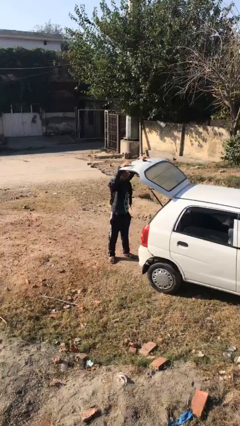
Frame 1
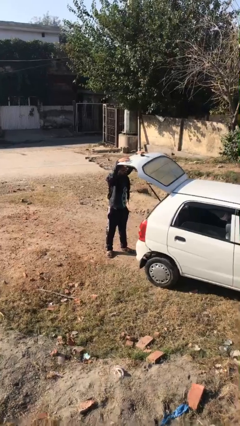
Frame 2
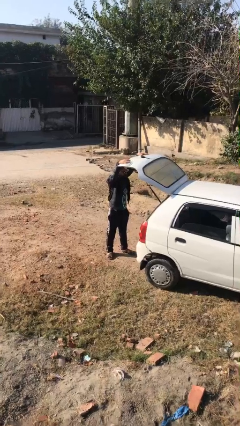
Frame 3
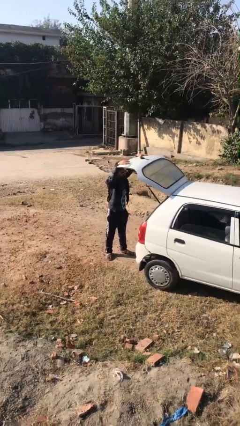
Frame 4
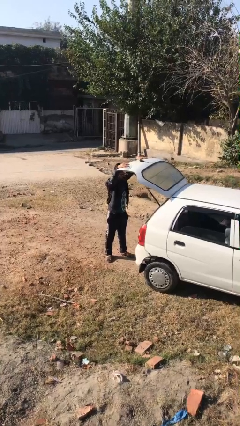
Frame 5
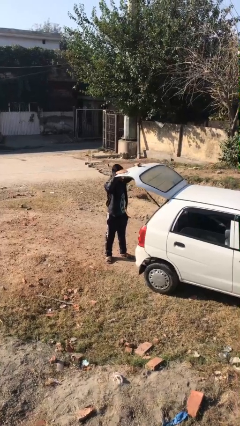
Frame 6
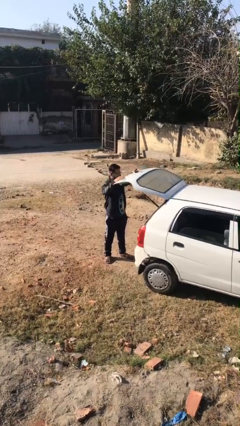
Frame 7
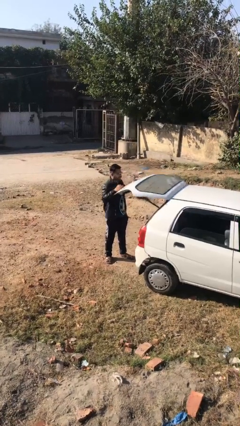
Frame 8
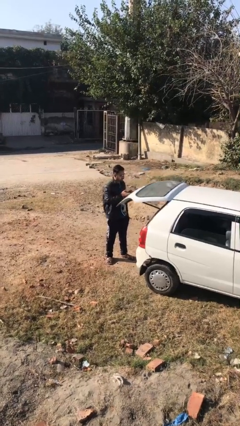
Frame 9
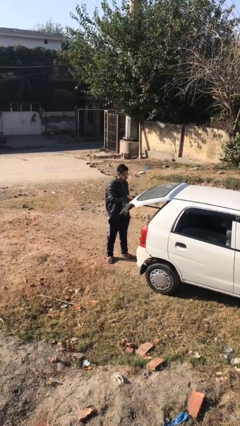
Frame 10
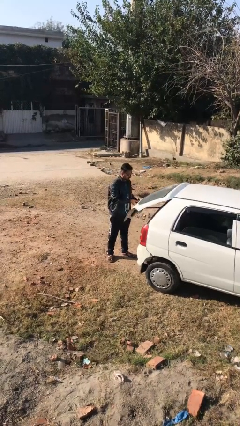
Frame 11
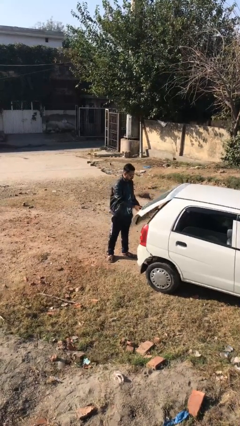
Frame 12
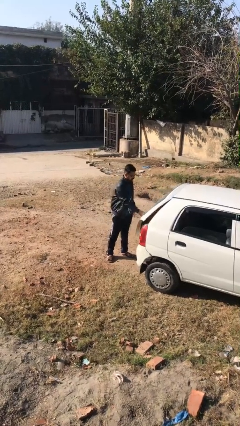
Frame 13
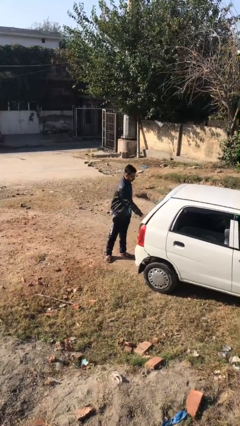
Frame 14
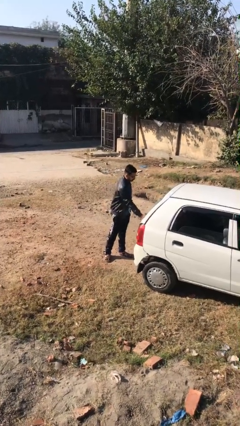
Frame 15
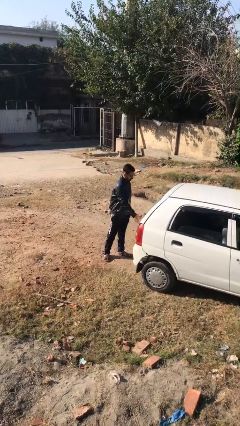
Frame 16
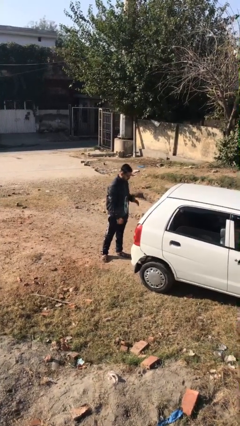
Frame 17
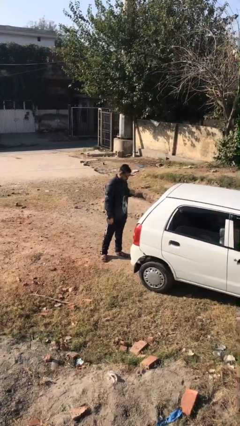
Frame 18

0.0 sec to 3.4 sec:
person closes car trunk

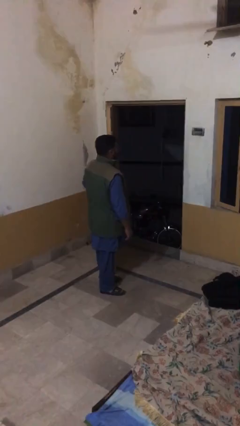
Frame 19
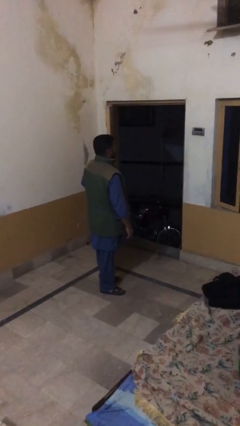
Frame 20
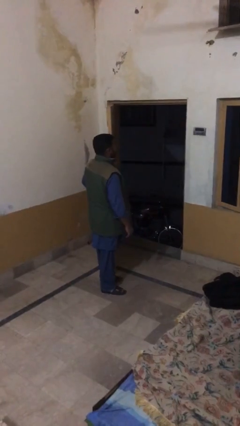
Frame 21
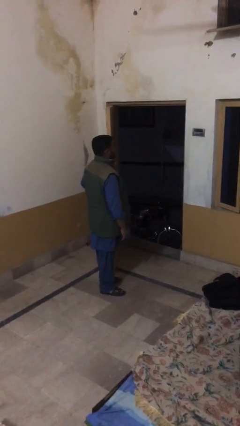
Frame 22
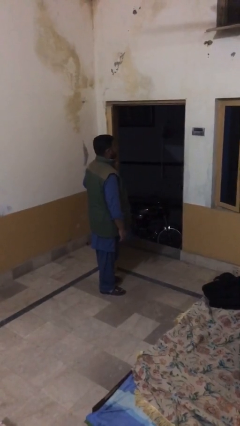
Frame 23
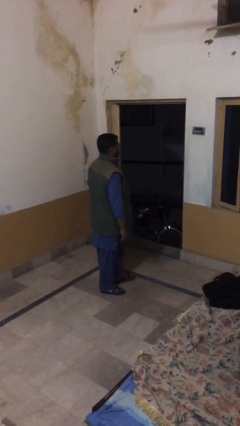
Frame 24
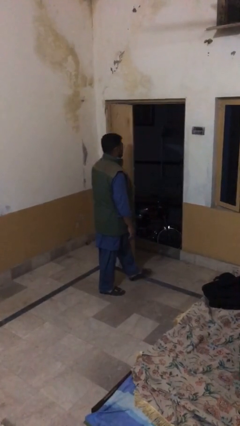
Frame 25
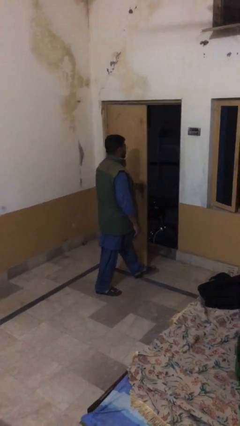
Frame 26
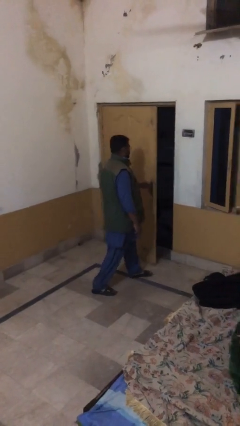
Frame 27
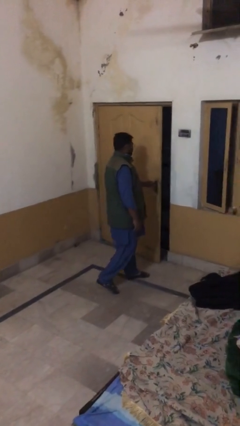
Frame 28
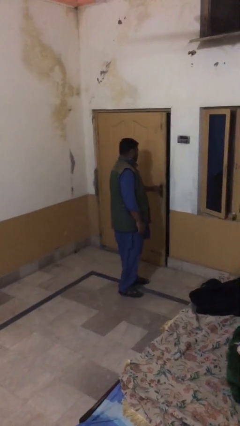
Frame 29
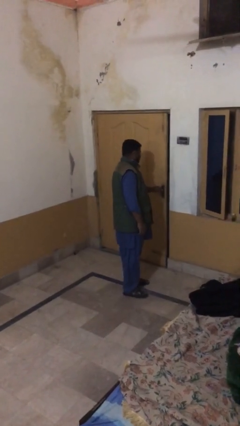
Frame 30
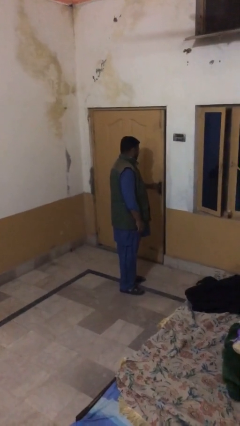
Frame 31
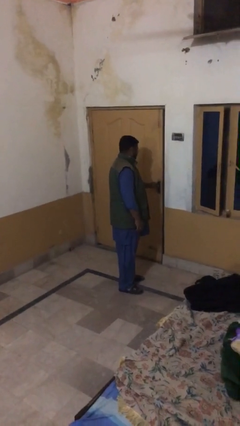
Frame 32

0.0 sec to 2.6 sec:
person closes facility door

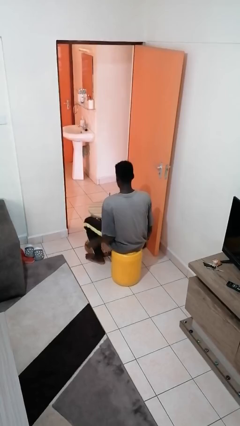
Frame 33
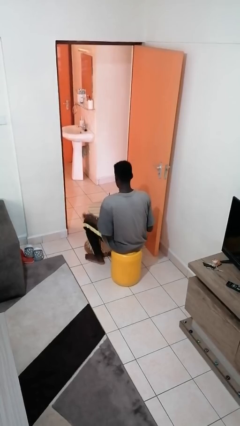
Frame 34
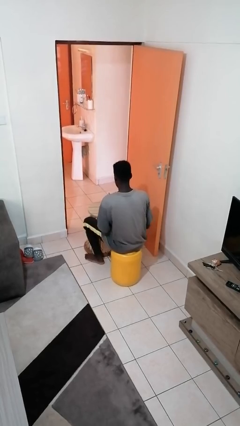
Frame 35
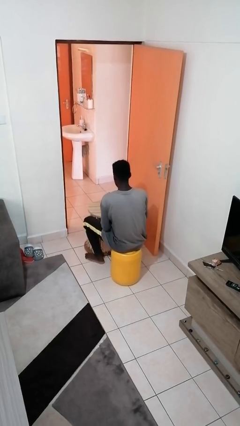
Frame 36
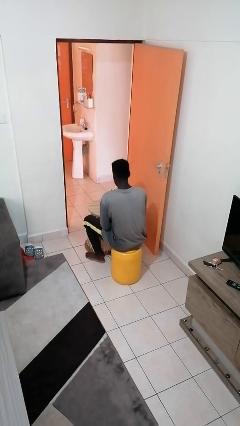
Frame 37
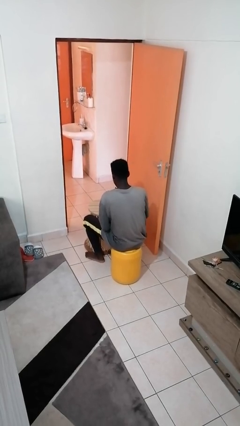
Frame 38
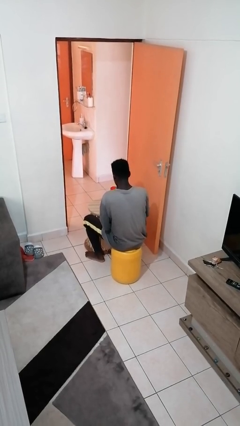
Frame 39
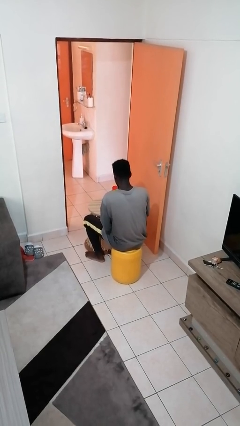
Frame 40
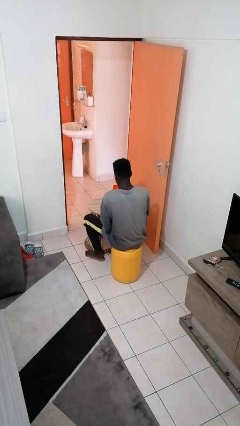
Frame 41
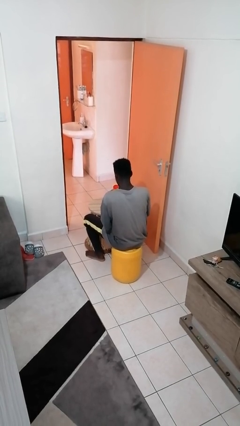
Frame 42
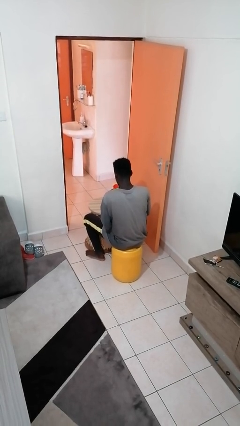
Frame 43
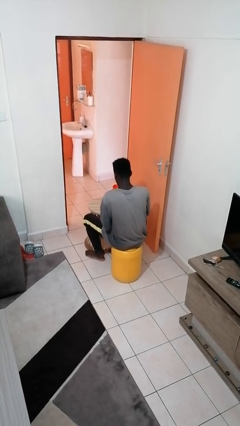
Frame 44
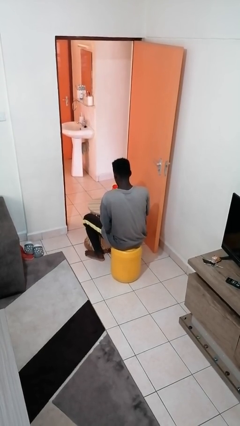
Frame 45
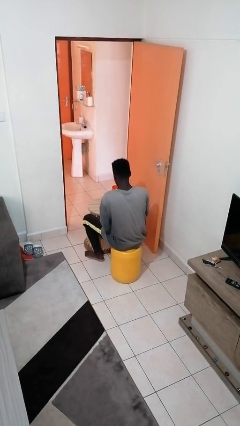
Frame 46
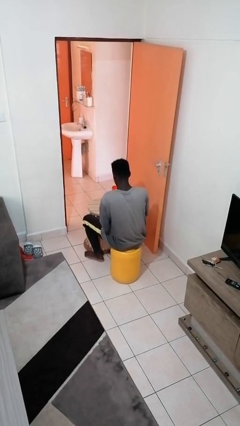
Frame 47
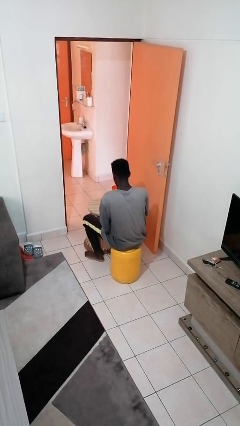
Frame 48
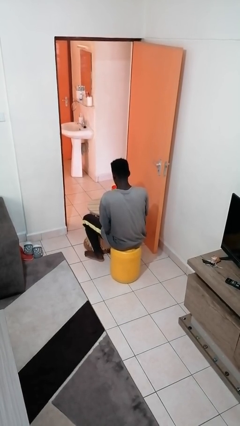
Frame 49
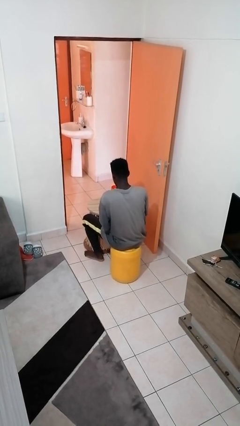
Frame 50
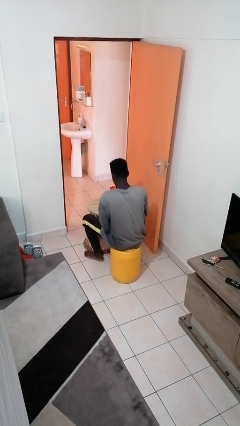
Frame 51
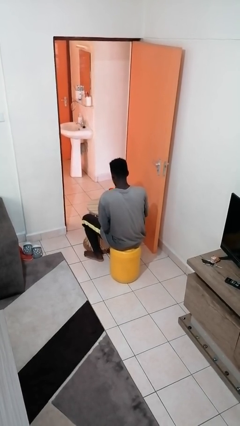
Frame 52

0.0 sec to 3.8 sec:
person drinks from straw

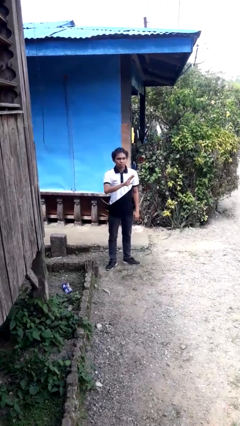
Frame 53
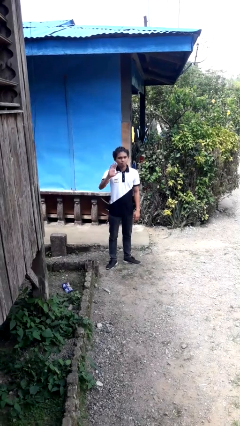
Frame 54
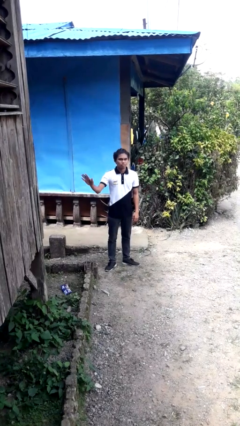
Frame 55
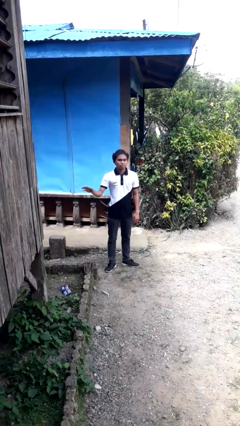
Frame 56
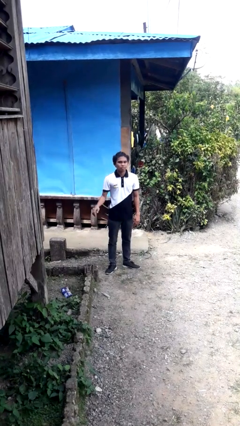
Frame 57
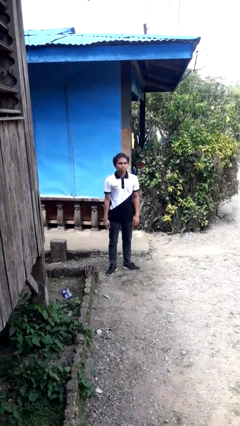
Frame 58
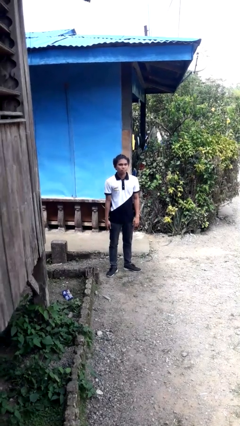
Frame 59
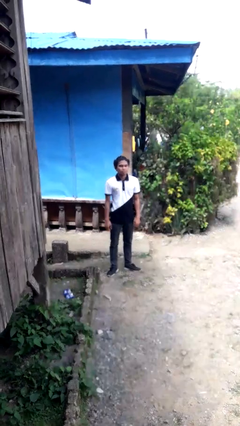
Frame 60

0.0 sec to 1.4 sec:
person gestures swipe right

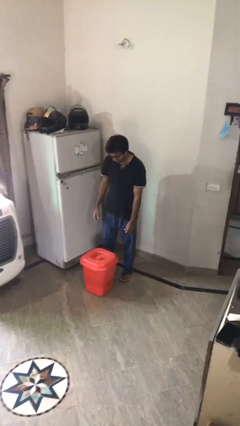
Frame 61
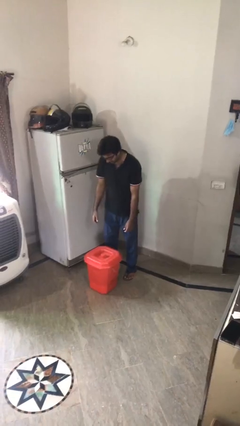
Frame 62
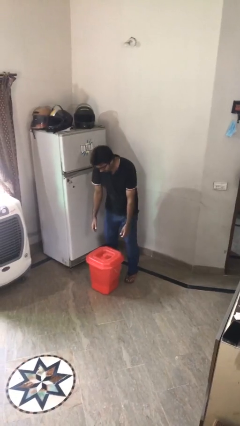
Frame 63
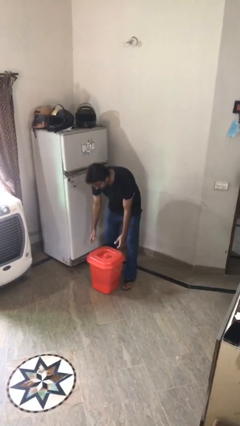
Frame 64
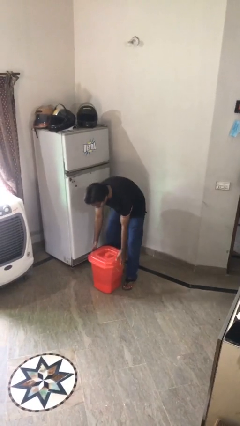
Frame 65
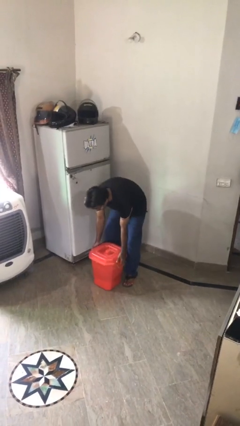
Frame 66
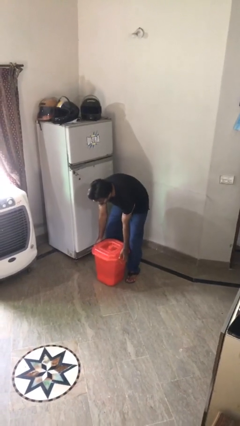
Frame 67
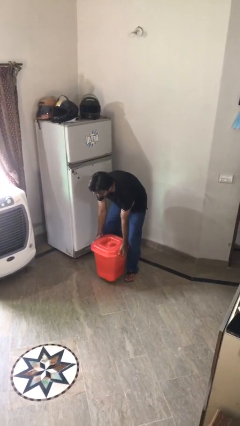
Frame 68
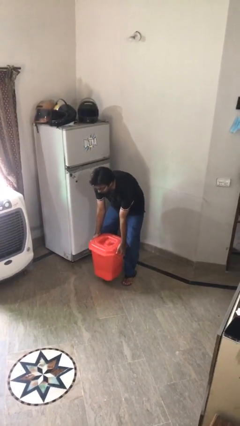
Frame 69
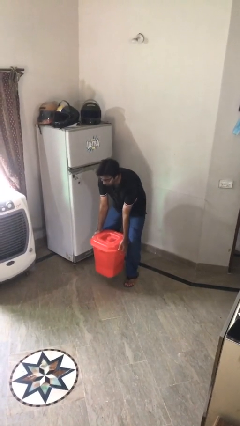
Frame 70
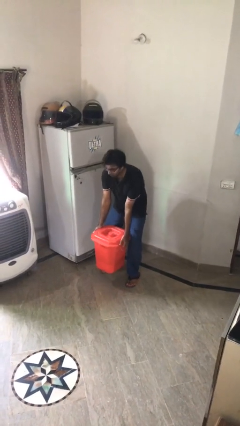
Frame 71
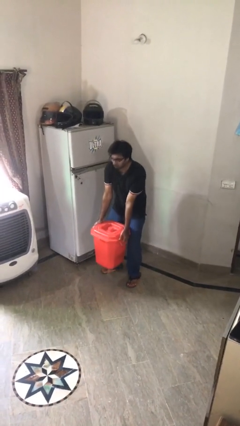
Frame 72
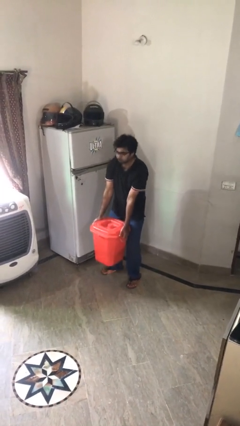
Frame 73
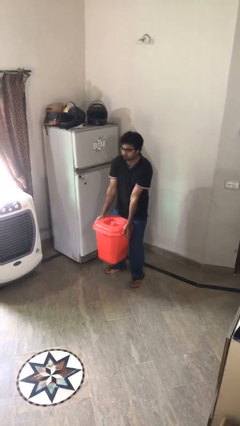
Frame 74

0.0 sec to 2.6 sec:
person picks up object from floor

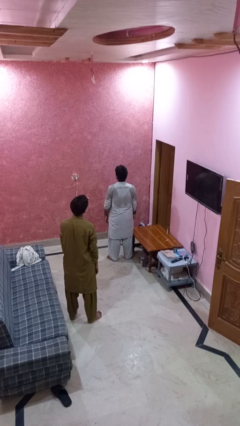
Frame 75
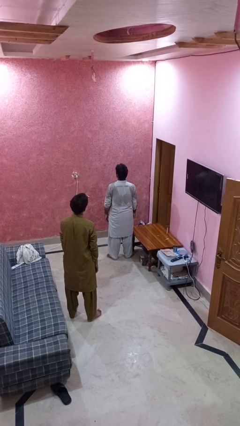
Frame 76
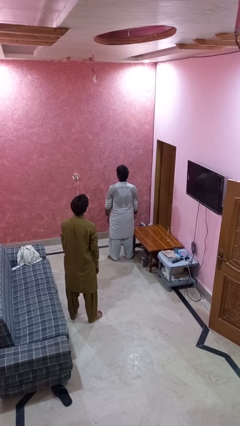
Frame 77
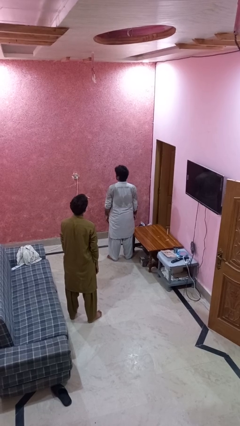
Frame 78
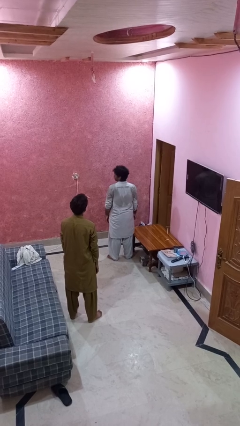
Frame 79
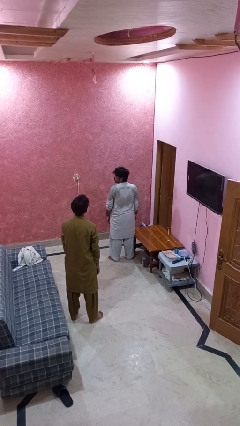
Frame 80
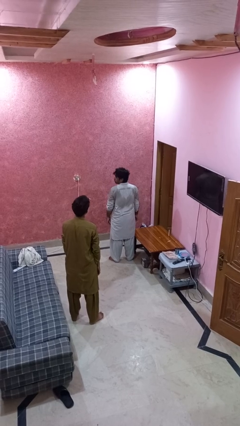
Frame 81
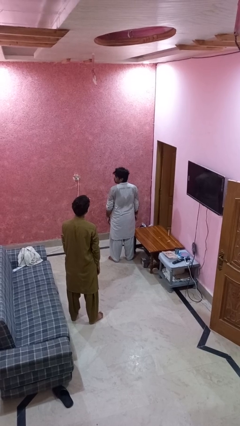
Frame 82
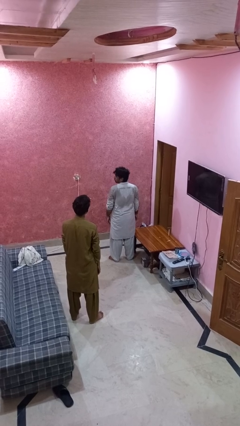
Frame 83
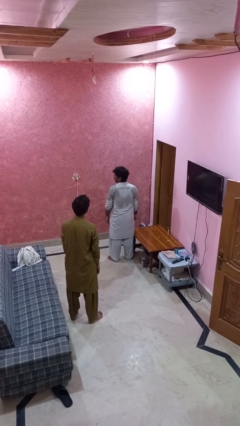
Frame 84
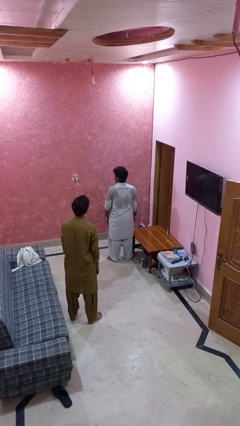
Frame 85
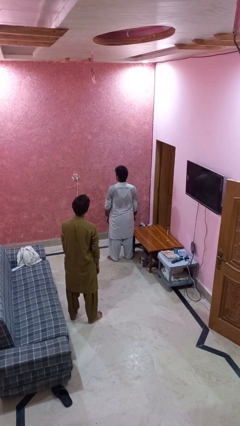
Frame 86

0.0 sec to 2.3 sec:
person looks over shoulder

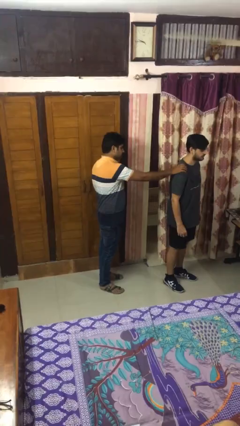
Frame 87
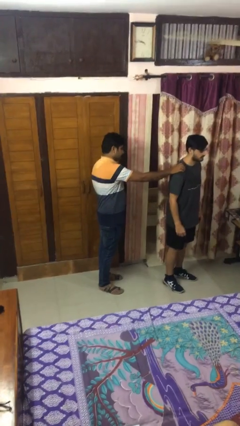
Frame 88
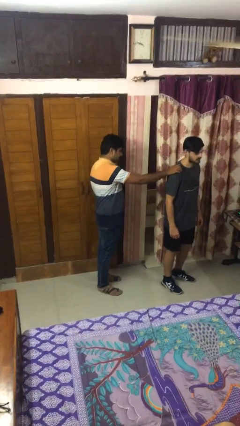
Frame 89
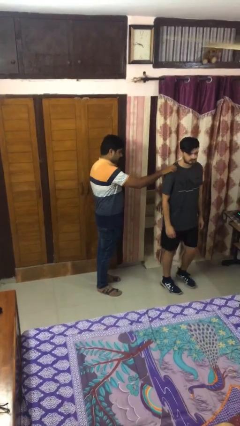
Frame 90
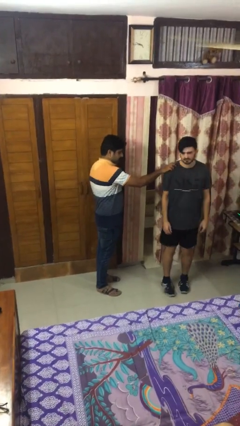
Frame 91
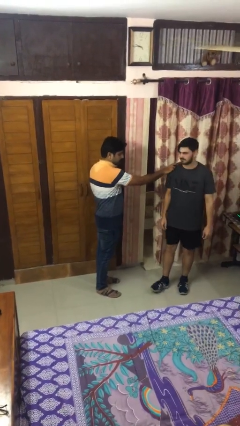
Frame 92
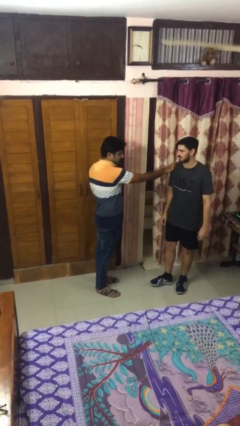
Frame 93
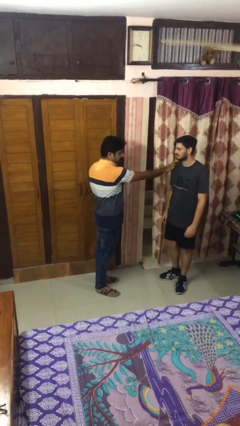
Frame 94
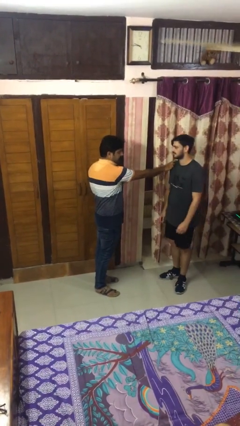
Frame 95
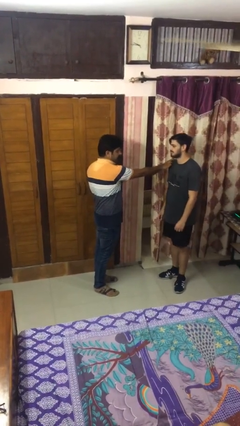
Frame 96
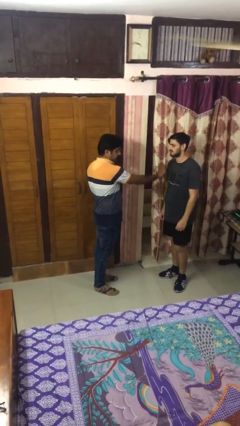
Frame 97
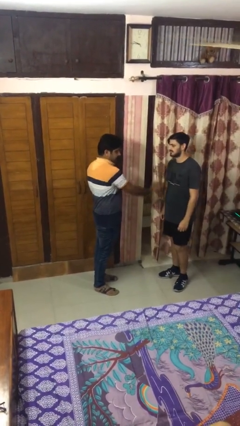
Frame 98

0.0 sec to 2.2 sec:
person spins person around
